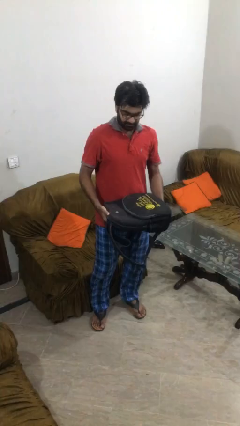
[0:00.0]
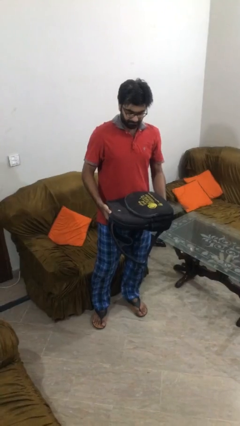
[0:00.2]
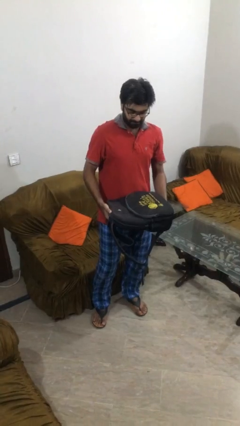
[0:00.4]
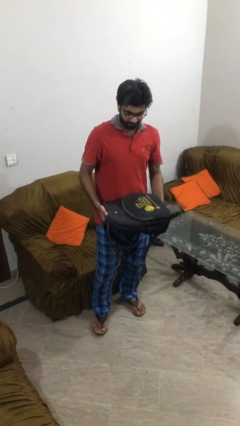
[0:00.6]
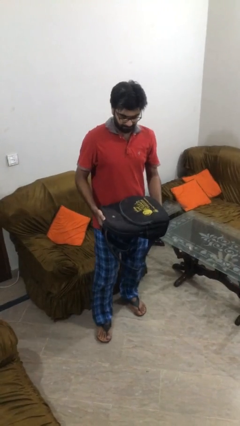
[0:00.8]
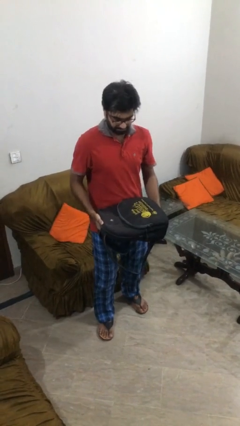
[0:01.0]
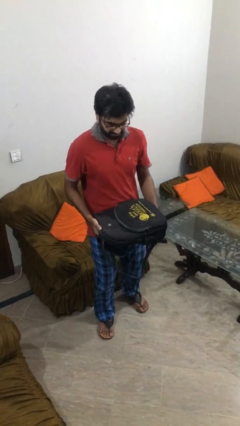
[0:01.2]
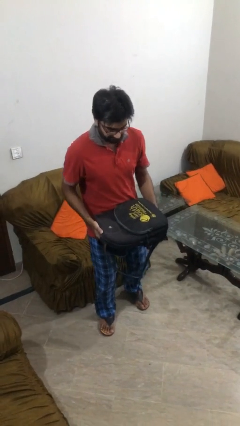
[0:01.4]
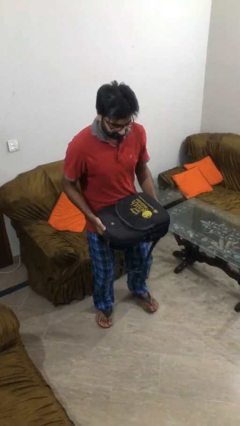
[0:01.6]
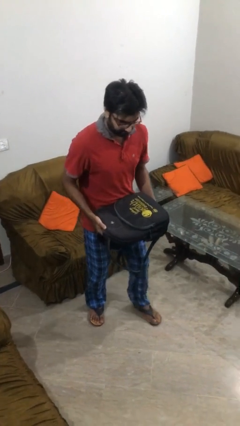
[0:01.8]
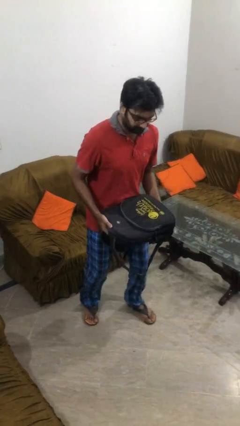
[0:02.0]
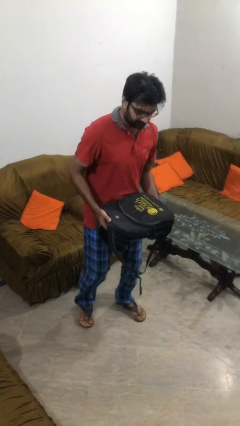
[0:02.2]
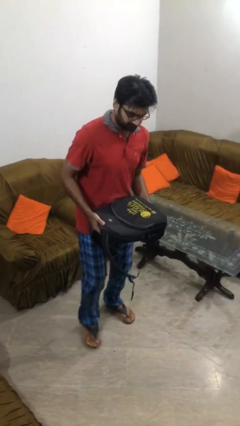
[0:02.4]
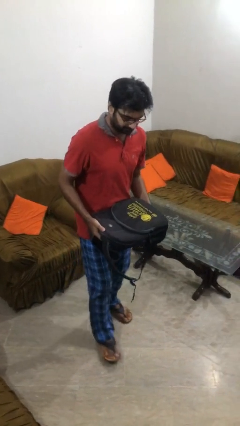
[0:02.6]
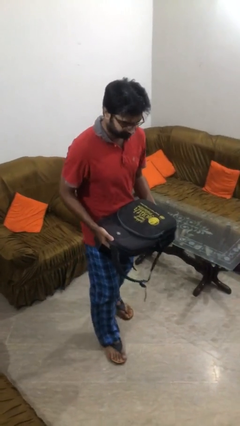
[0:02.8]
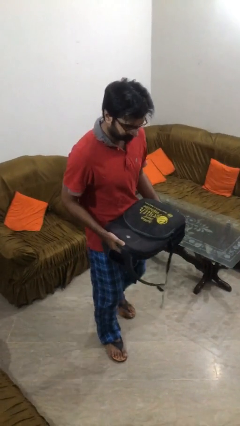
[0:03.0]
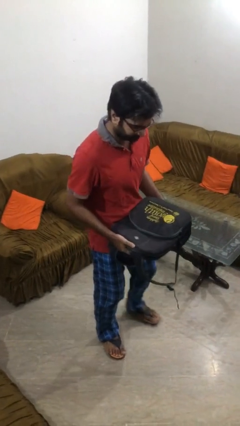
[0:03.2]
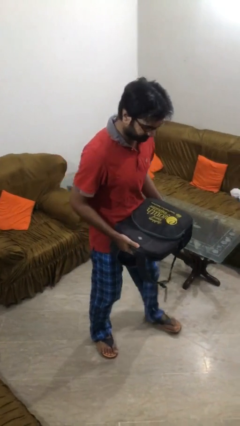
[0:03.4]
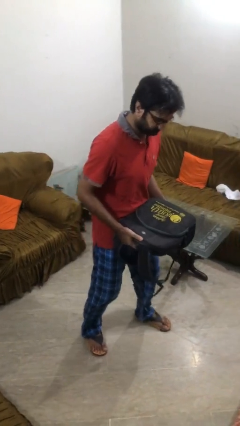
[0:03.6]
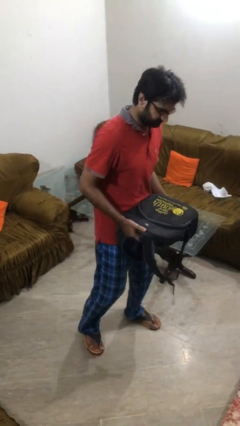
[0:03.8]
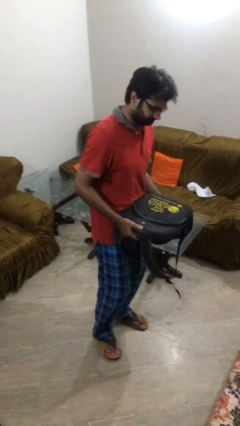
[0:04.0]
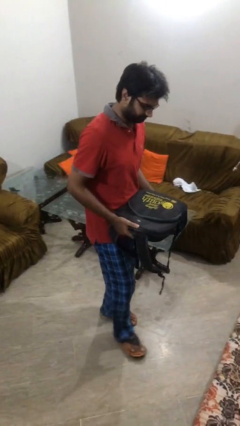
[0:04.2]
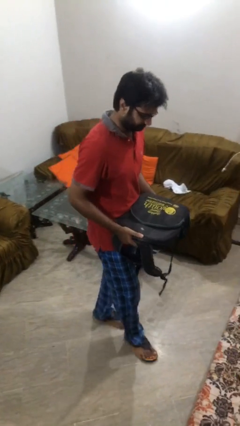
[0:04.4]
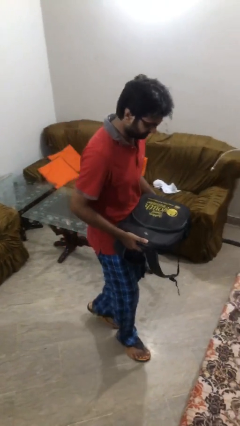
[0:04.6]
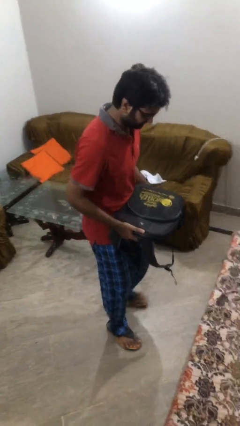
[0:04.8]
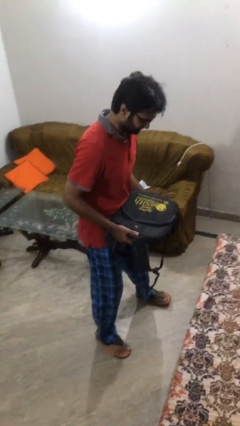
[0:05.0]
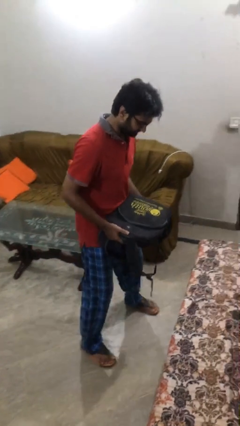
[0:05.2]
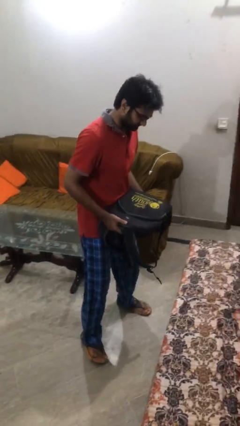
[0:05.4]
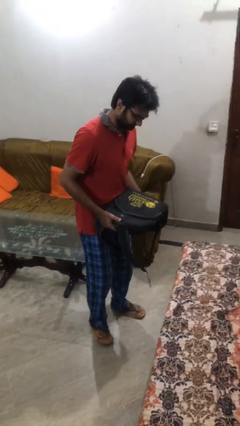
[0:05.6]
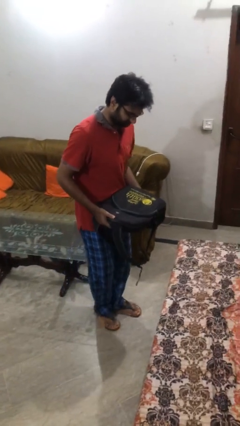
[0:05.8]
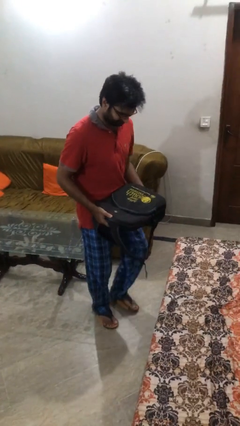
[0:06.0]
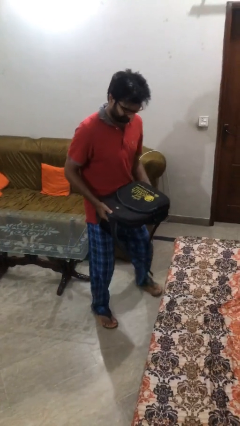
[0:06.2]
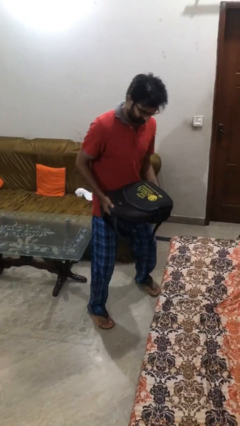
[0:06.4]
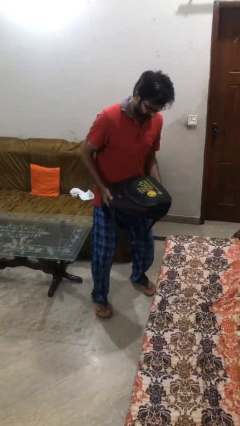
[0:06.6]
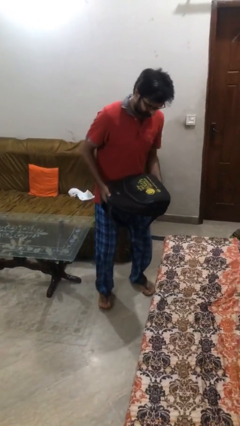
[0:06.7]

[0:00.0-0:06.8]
person carries heavy object

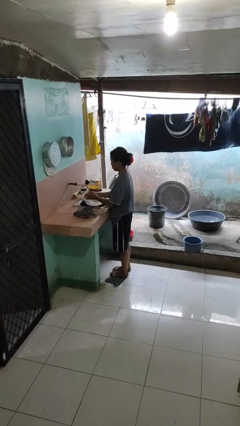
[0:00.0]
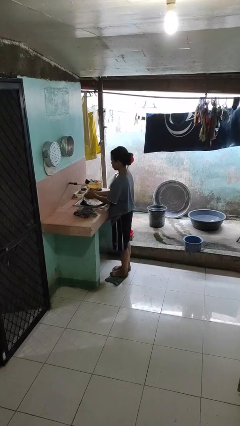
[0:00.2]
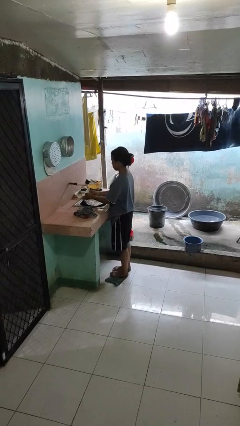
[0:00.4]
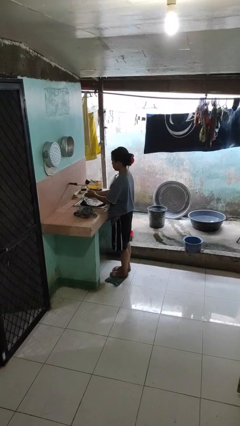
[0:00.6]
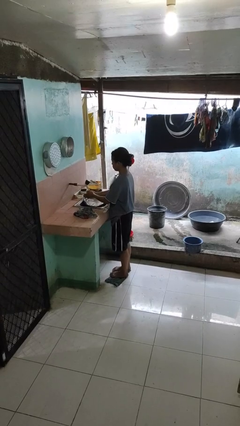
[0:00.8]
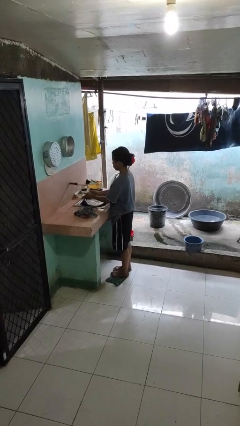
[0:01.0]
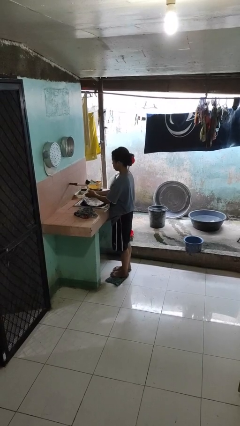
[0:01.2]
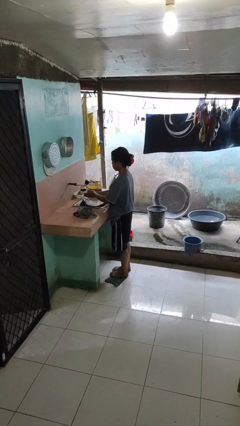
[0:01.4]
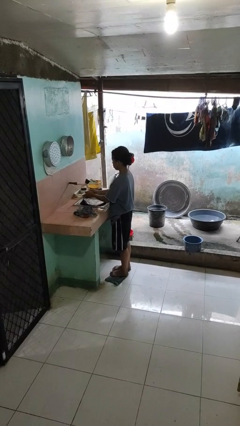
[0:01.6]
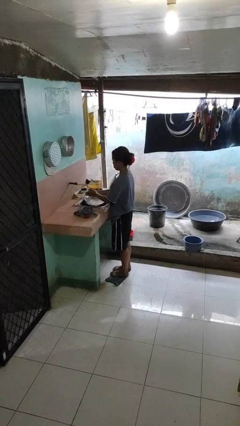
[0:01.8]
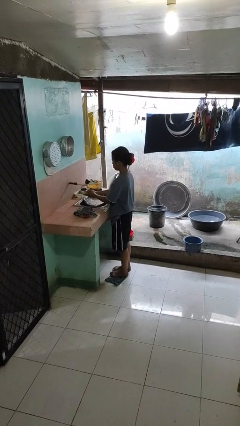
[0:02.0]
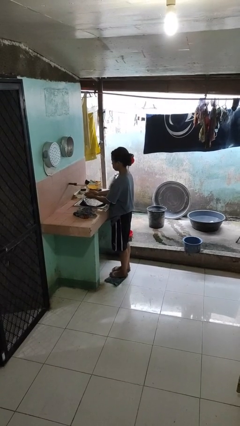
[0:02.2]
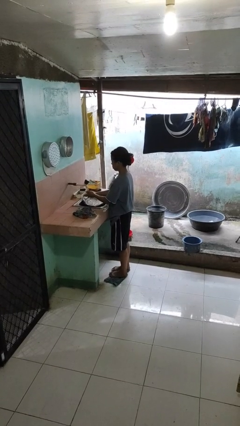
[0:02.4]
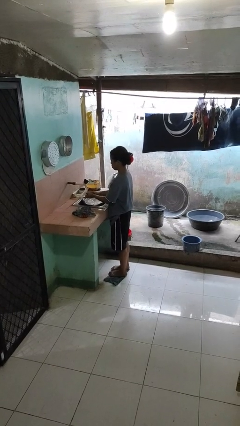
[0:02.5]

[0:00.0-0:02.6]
person washes hands

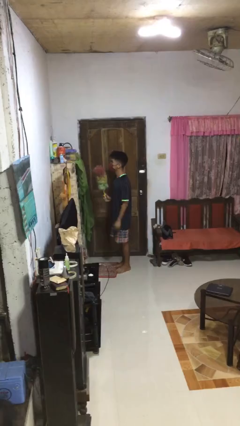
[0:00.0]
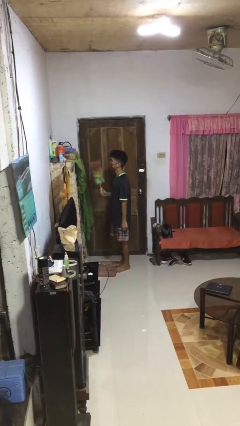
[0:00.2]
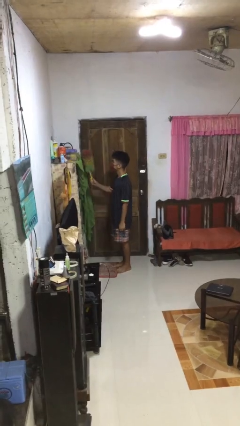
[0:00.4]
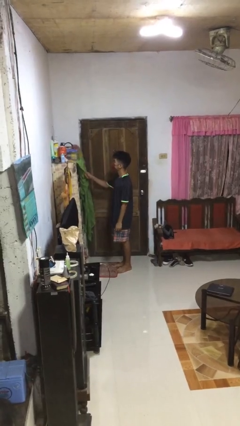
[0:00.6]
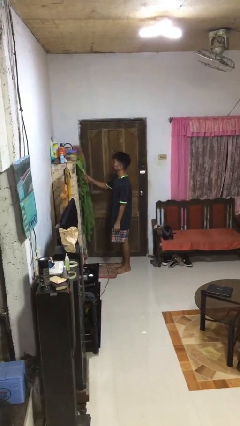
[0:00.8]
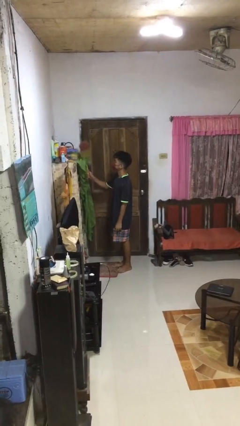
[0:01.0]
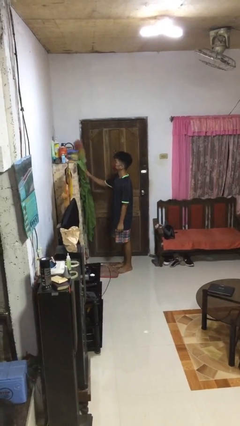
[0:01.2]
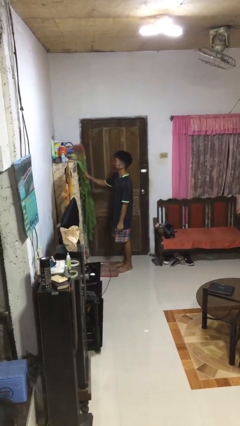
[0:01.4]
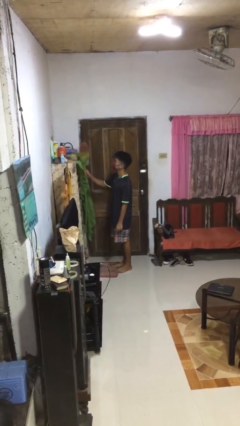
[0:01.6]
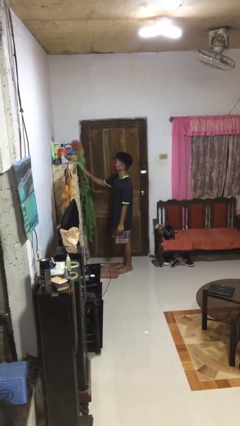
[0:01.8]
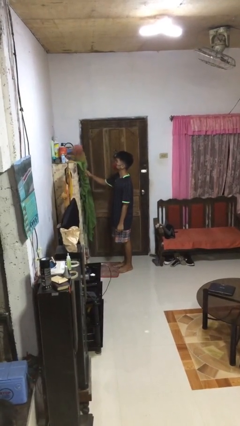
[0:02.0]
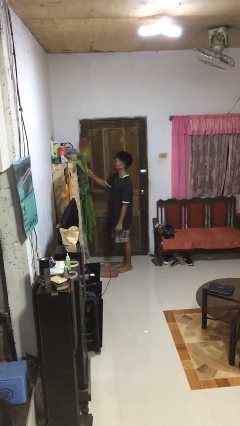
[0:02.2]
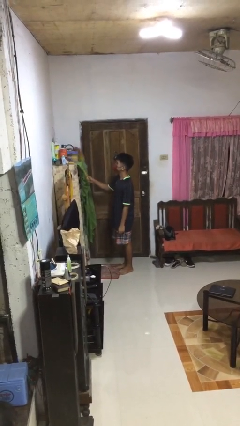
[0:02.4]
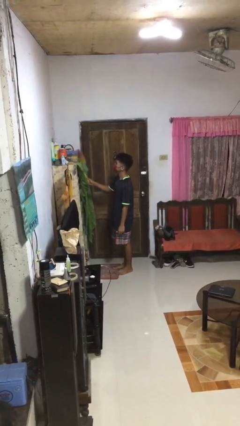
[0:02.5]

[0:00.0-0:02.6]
person dusts furniture

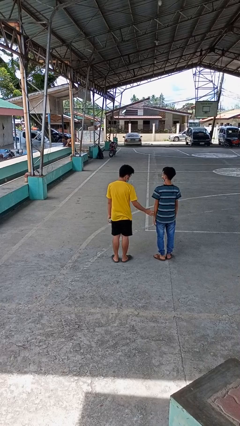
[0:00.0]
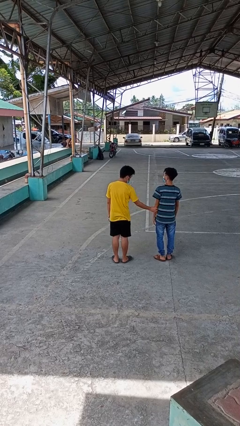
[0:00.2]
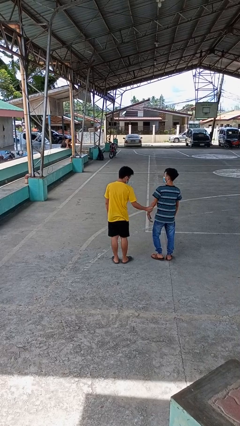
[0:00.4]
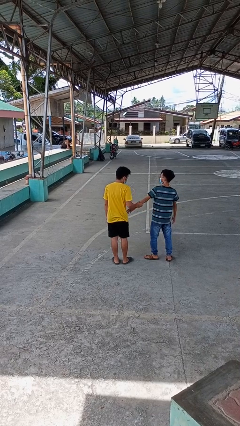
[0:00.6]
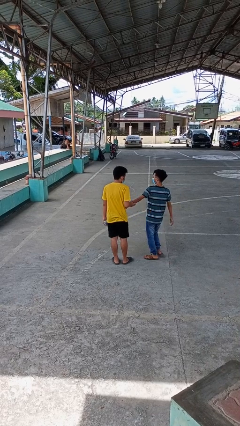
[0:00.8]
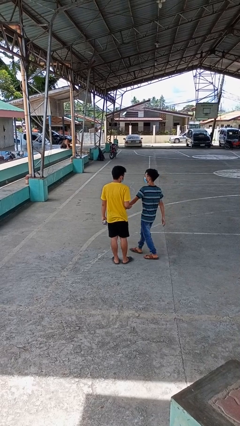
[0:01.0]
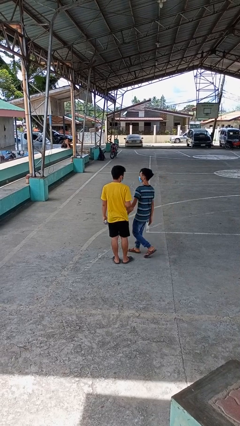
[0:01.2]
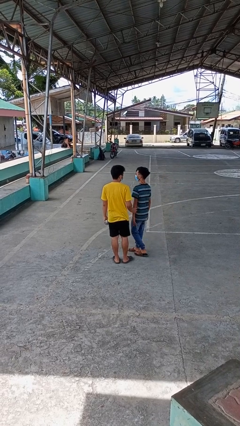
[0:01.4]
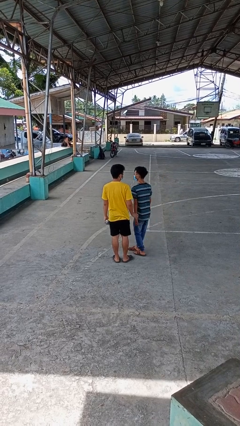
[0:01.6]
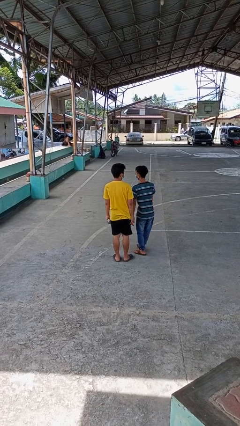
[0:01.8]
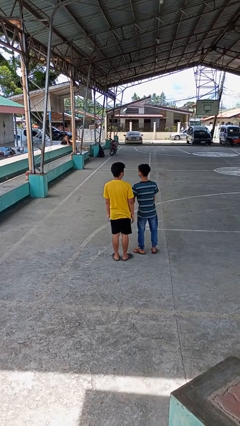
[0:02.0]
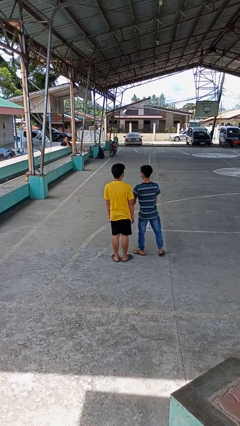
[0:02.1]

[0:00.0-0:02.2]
person grabs person by forearm

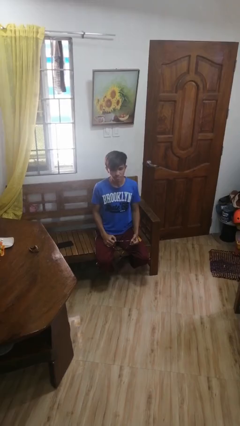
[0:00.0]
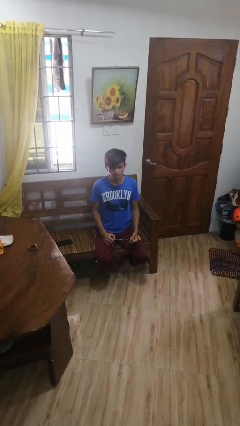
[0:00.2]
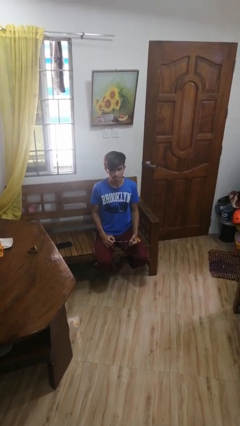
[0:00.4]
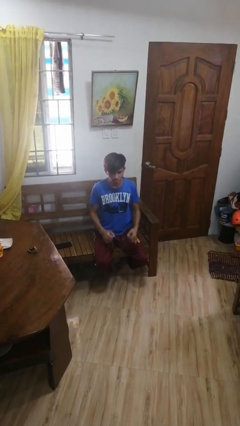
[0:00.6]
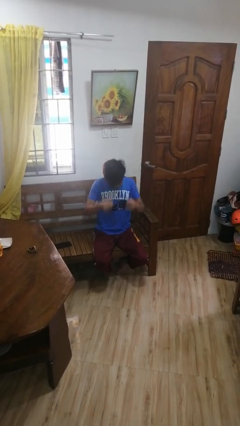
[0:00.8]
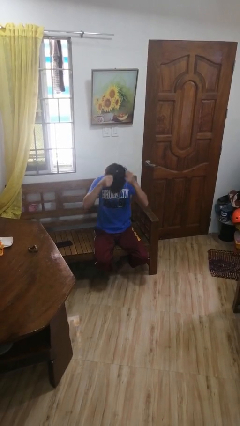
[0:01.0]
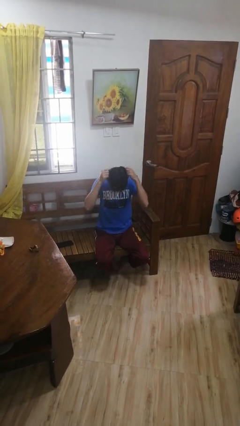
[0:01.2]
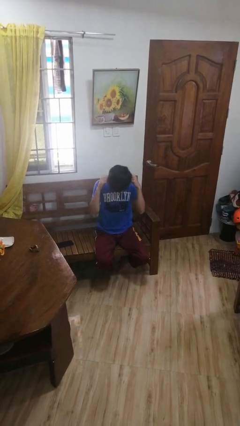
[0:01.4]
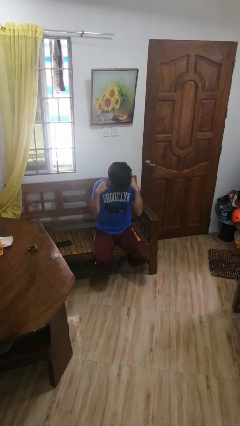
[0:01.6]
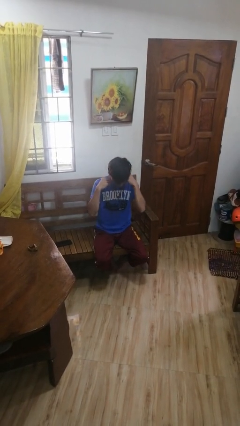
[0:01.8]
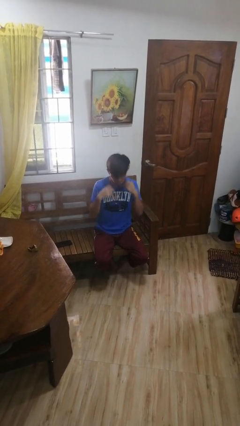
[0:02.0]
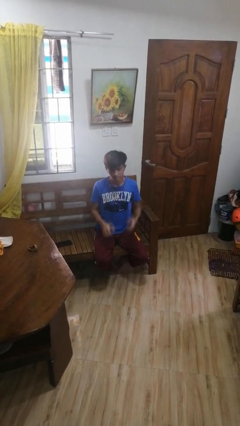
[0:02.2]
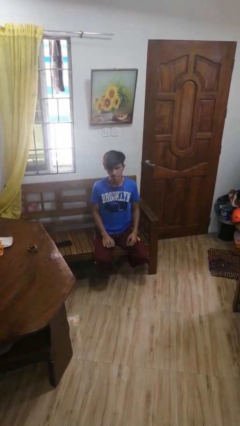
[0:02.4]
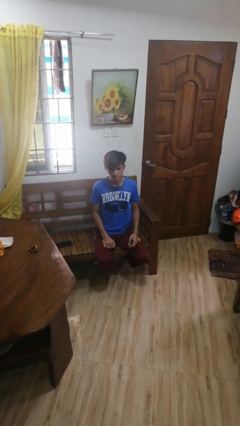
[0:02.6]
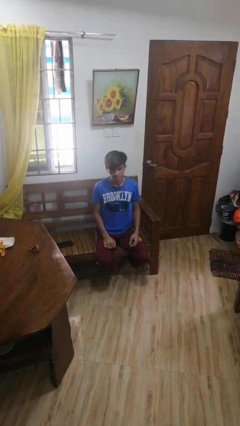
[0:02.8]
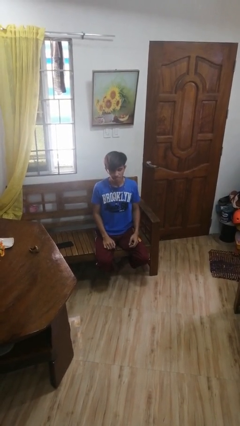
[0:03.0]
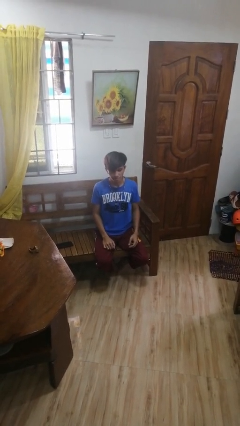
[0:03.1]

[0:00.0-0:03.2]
person puts on necklace

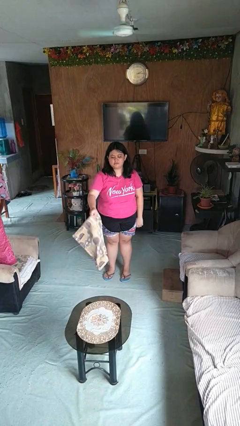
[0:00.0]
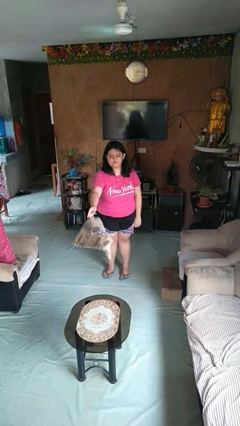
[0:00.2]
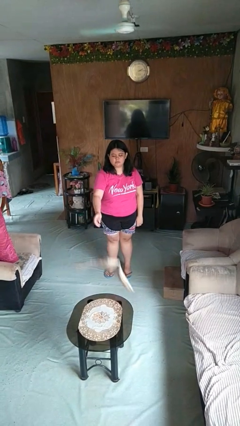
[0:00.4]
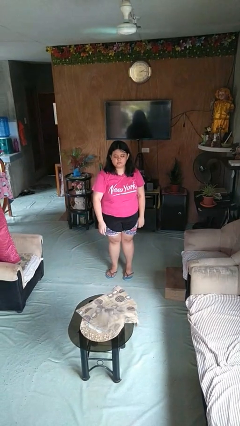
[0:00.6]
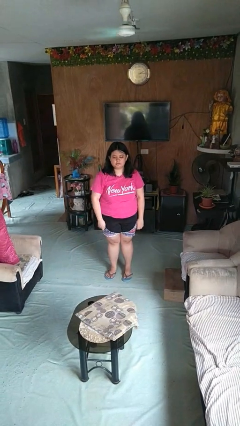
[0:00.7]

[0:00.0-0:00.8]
person throws object on table
